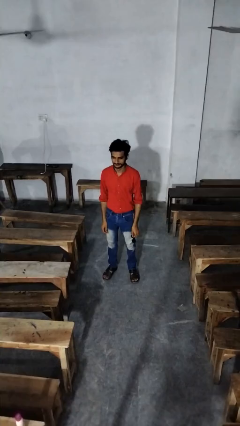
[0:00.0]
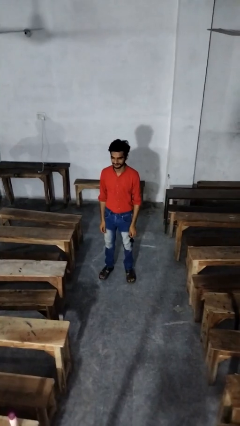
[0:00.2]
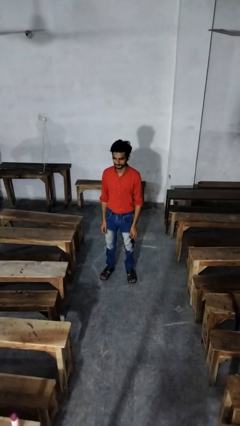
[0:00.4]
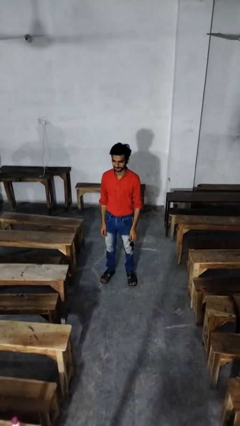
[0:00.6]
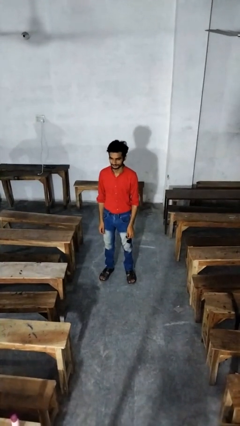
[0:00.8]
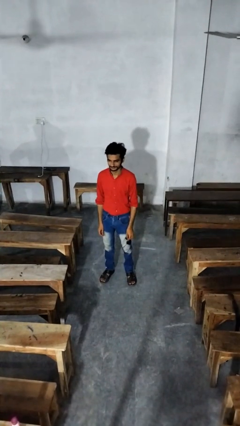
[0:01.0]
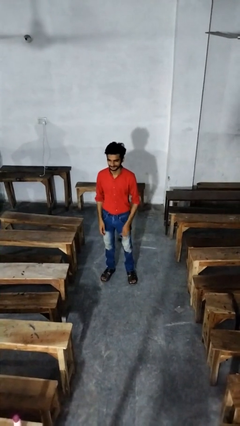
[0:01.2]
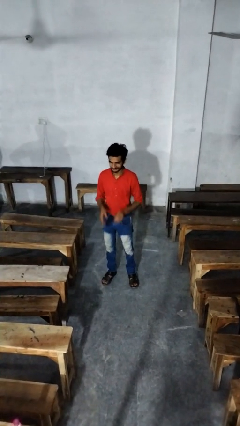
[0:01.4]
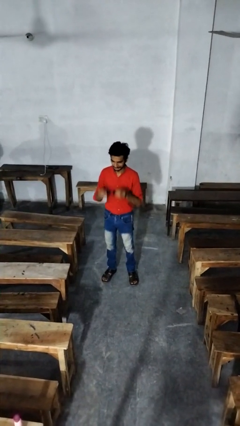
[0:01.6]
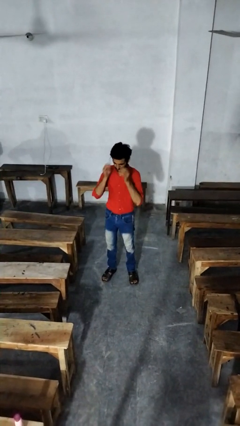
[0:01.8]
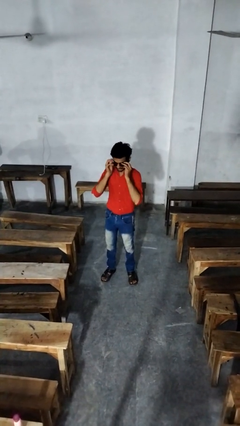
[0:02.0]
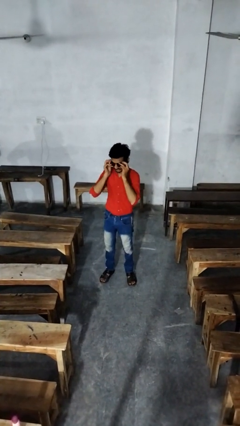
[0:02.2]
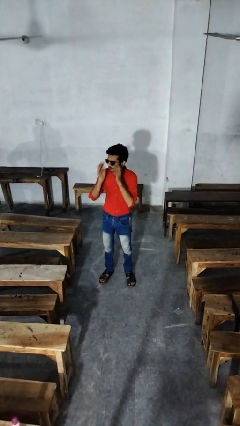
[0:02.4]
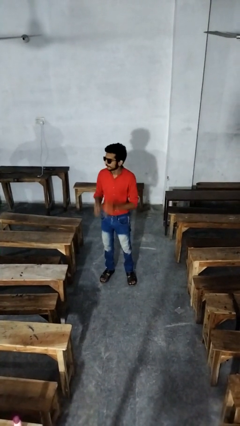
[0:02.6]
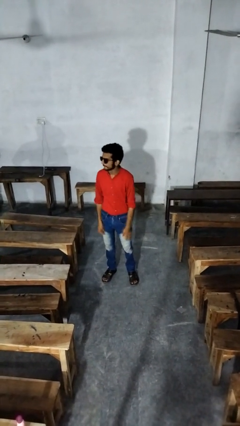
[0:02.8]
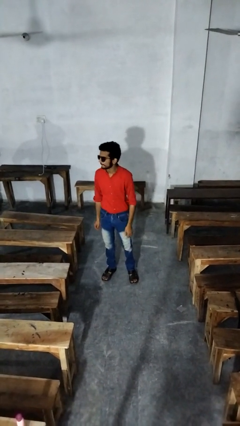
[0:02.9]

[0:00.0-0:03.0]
person puts on sunglasses

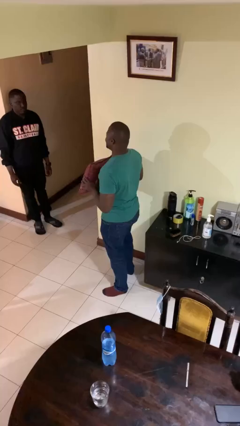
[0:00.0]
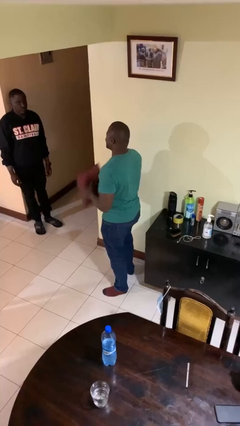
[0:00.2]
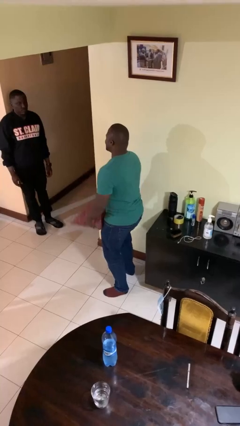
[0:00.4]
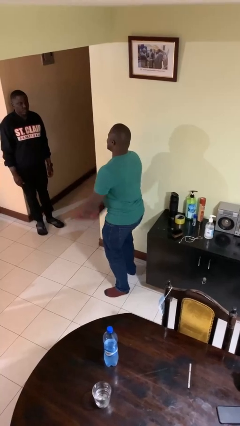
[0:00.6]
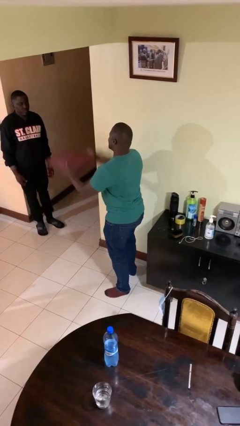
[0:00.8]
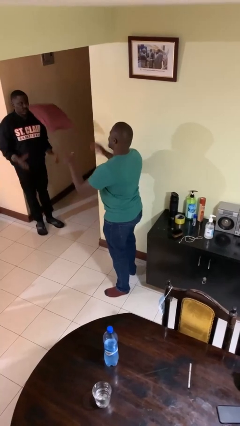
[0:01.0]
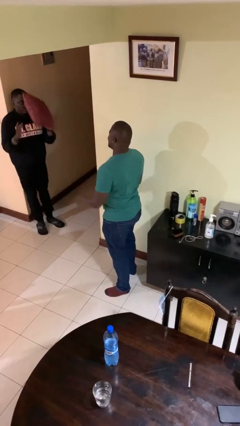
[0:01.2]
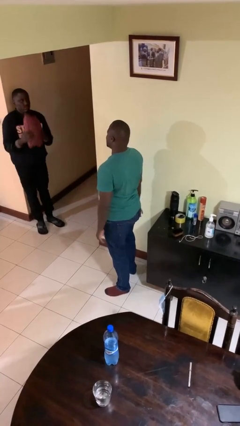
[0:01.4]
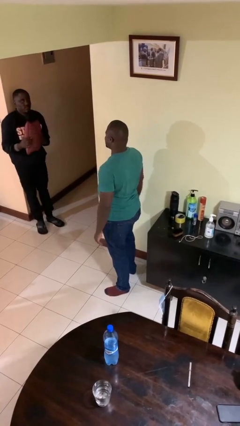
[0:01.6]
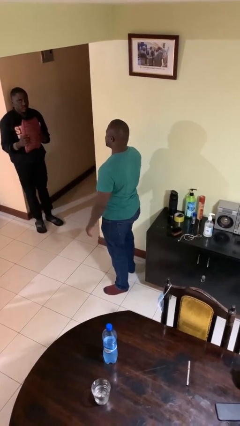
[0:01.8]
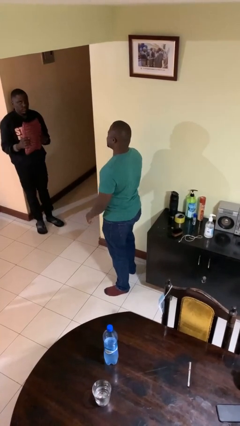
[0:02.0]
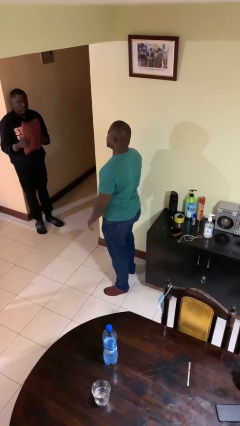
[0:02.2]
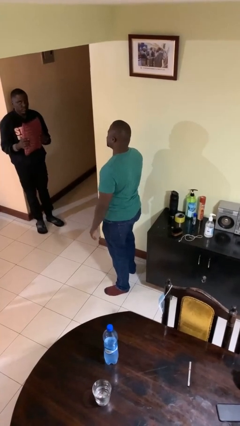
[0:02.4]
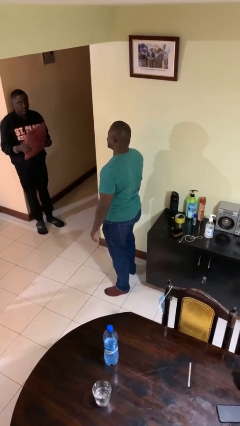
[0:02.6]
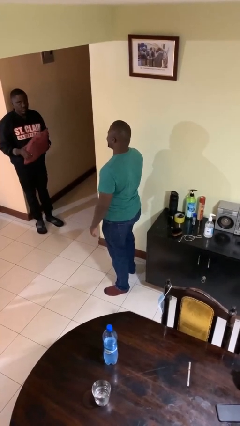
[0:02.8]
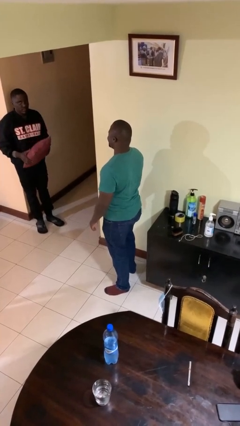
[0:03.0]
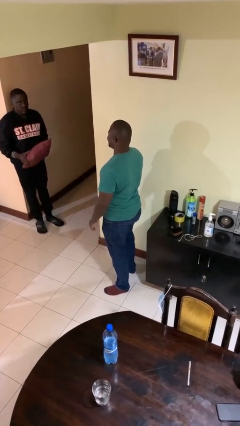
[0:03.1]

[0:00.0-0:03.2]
person throws object to person

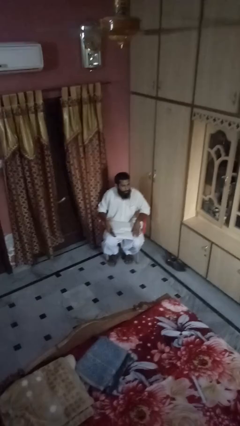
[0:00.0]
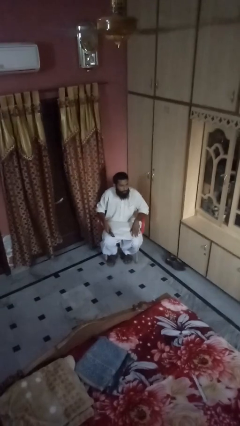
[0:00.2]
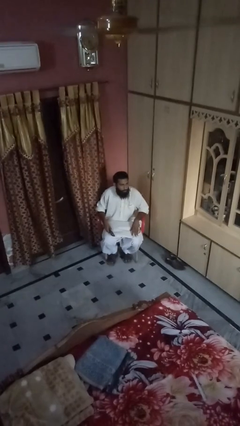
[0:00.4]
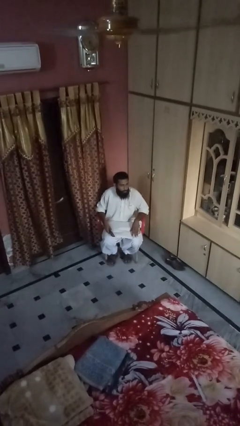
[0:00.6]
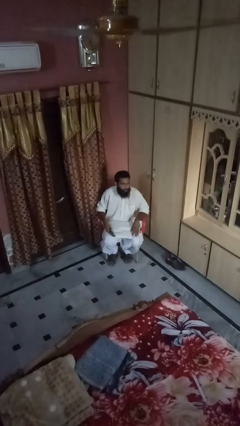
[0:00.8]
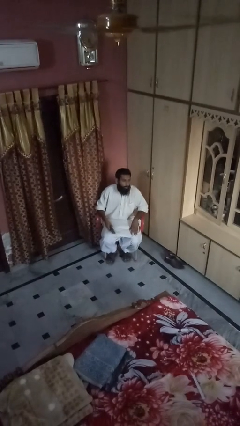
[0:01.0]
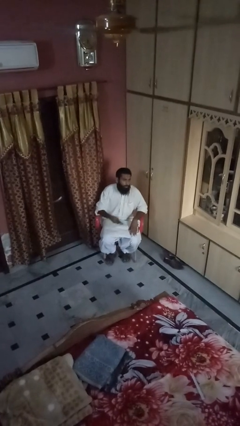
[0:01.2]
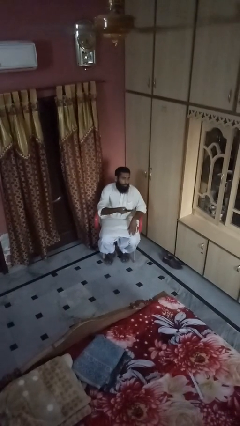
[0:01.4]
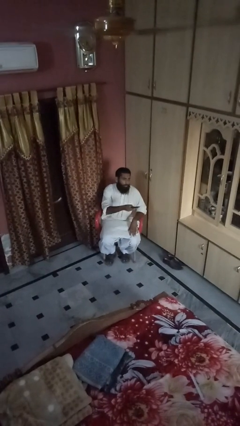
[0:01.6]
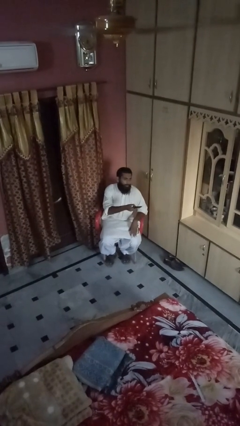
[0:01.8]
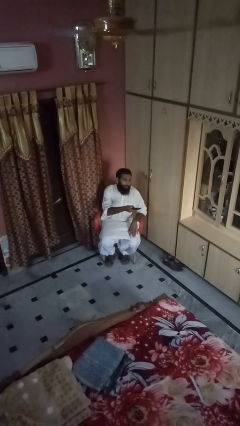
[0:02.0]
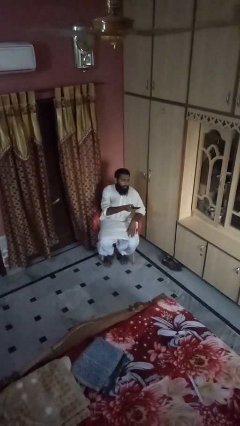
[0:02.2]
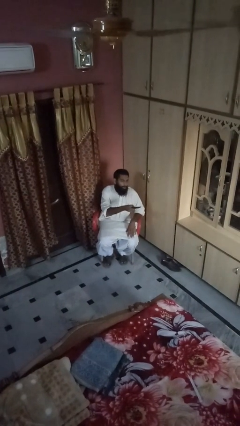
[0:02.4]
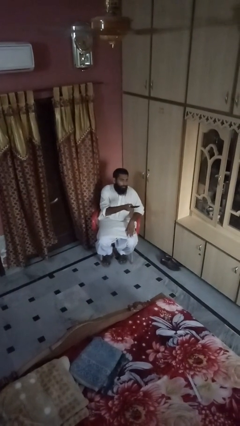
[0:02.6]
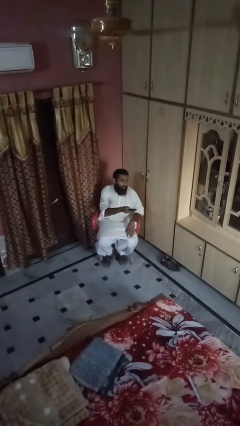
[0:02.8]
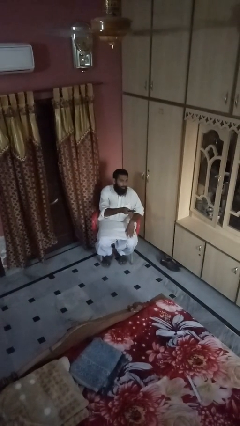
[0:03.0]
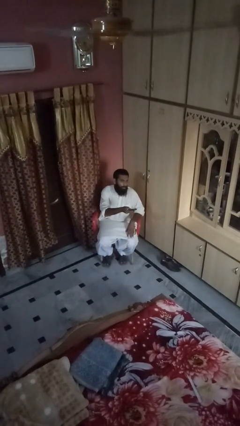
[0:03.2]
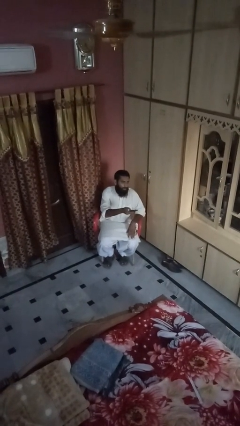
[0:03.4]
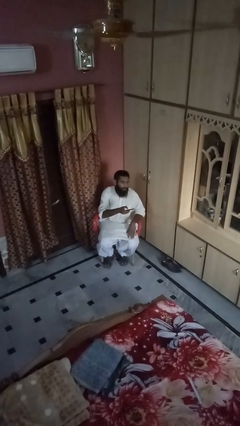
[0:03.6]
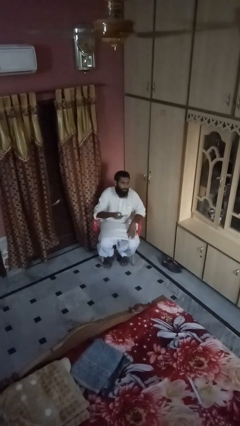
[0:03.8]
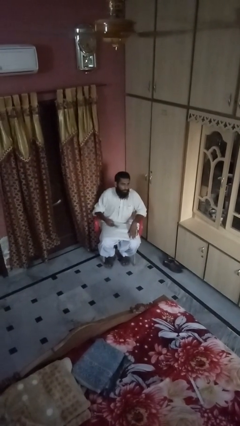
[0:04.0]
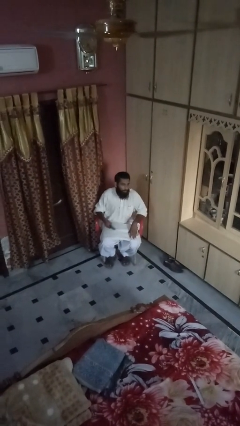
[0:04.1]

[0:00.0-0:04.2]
person uses television remote

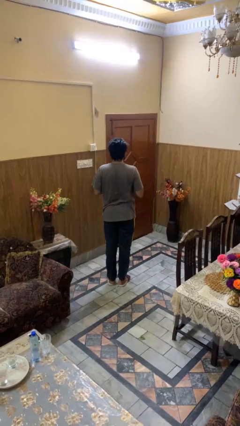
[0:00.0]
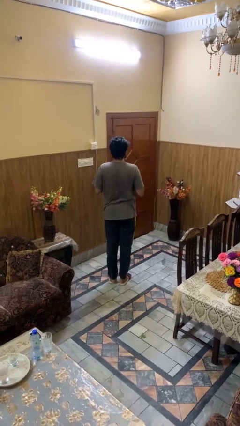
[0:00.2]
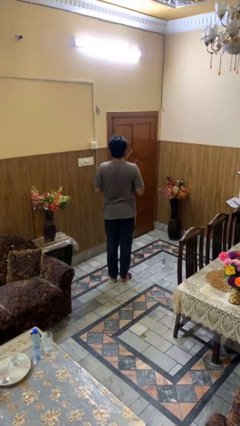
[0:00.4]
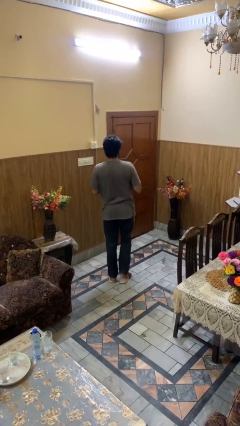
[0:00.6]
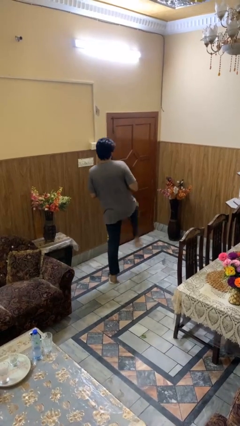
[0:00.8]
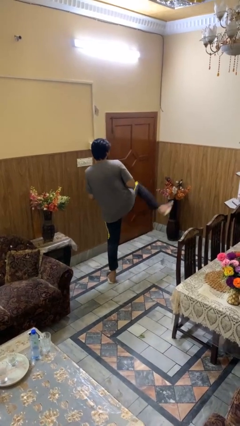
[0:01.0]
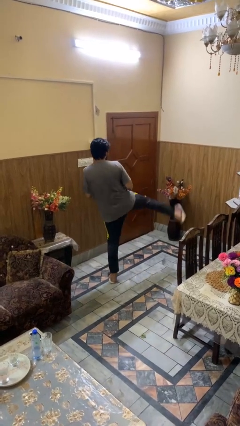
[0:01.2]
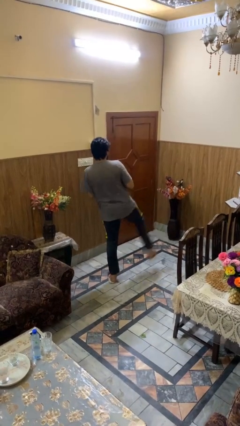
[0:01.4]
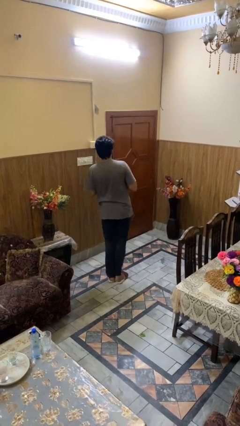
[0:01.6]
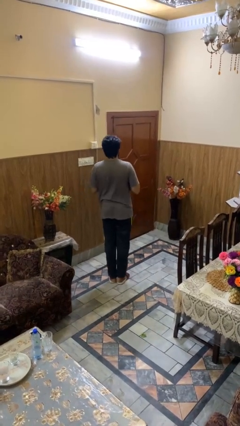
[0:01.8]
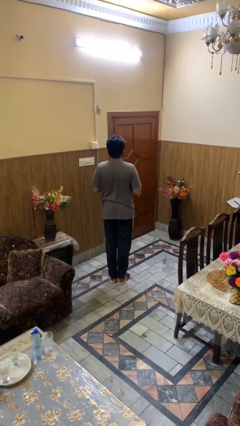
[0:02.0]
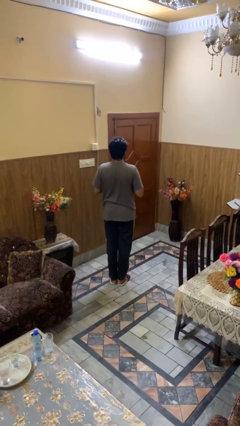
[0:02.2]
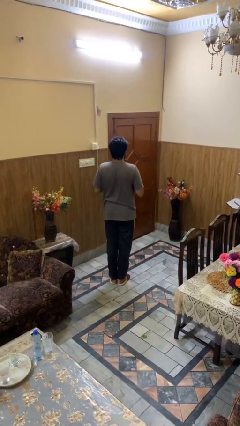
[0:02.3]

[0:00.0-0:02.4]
person karate kicks

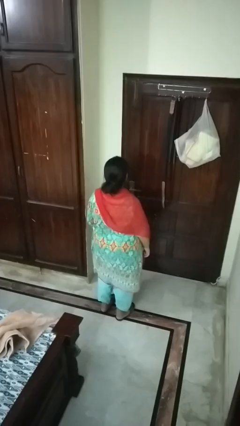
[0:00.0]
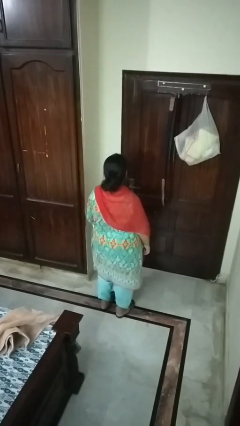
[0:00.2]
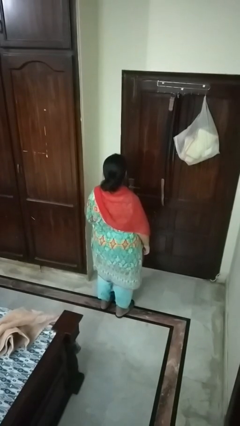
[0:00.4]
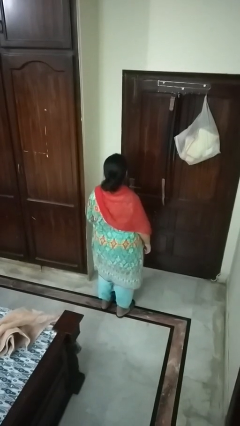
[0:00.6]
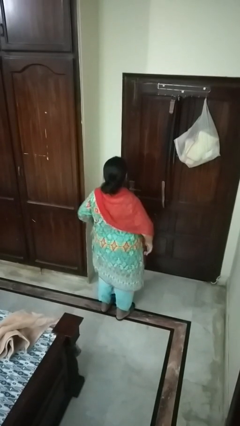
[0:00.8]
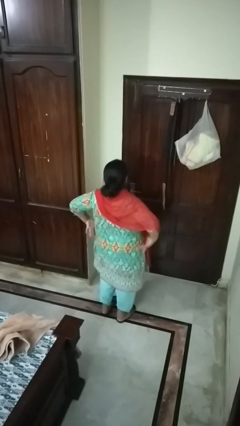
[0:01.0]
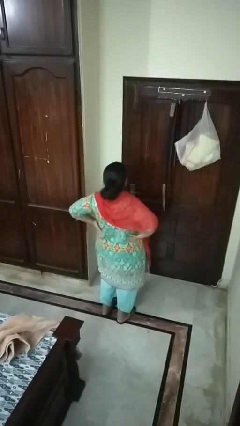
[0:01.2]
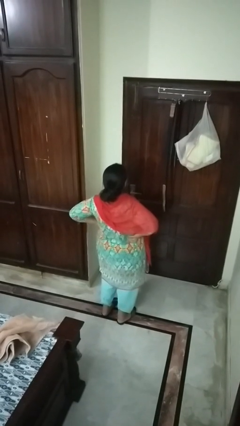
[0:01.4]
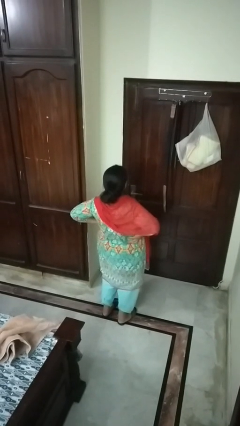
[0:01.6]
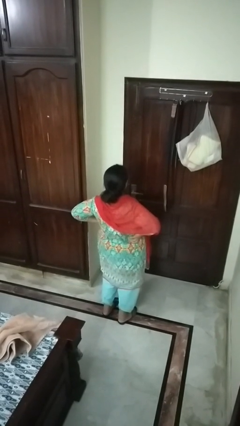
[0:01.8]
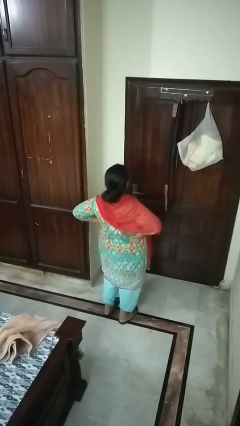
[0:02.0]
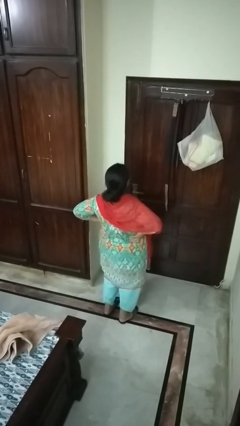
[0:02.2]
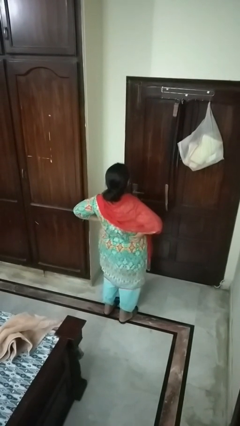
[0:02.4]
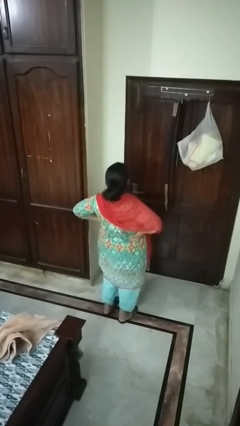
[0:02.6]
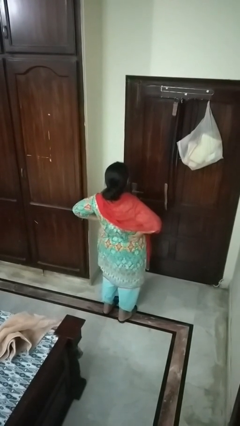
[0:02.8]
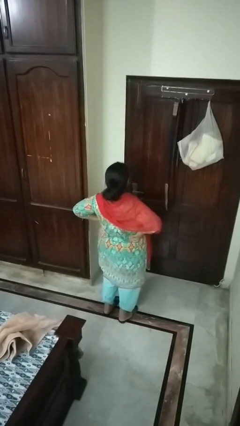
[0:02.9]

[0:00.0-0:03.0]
person stretches back

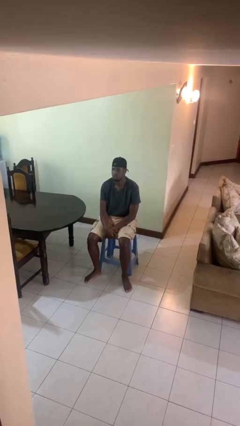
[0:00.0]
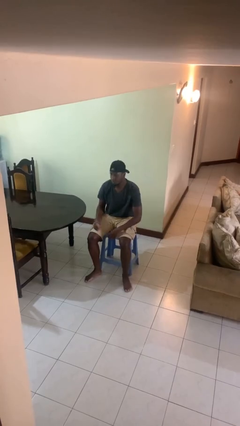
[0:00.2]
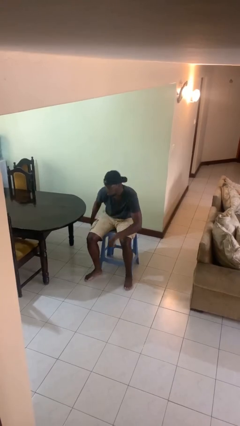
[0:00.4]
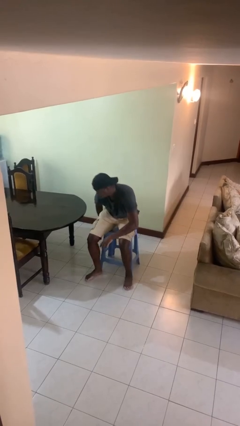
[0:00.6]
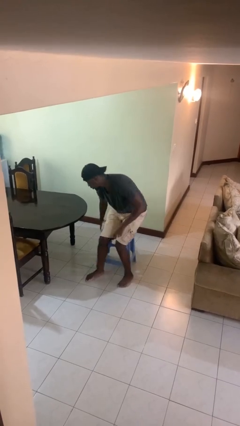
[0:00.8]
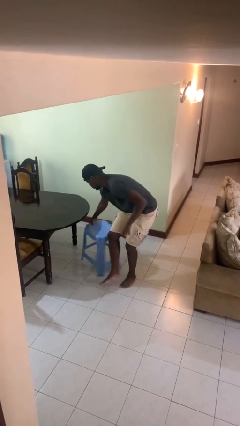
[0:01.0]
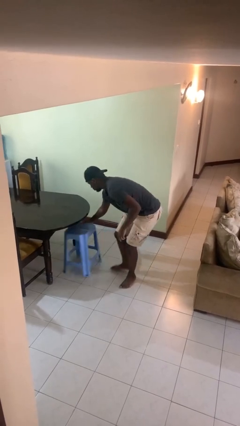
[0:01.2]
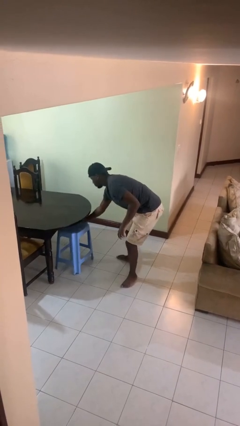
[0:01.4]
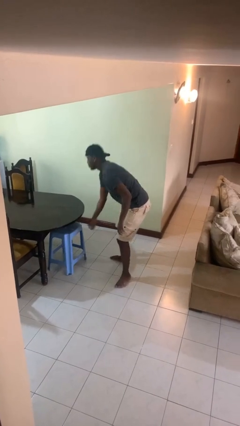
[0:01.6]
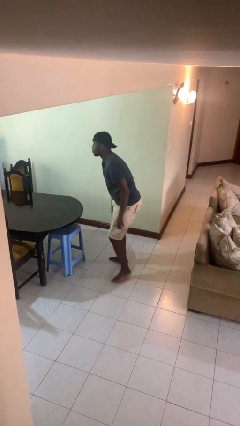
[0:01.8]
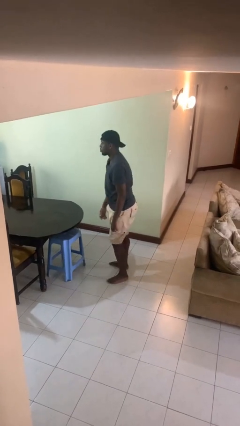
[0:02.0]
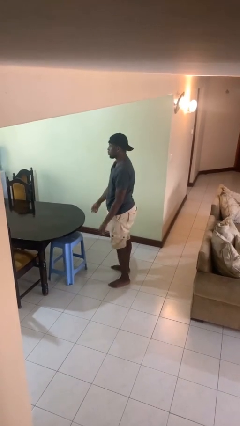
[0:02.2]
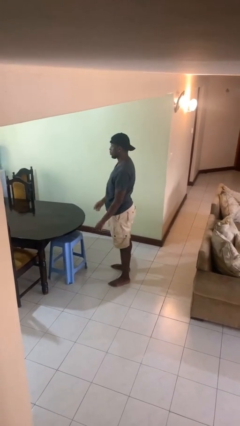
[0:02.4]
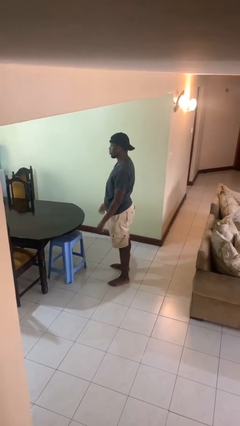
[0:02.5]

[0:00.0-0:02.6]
person stands up
